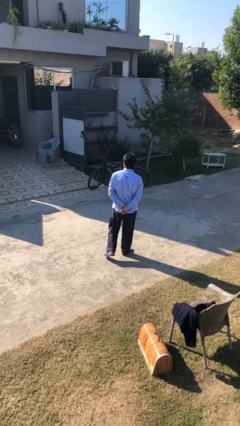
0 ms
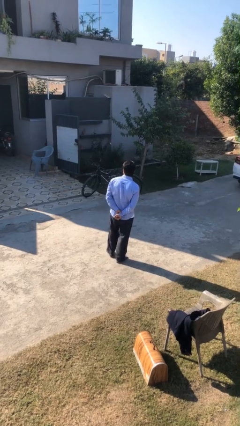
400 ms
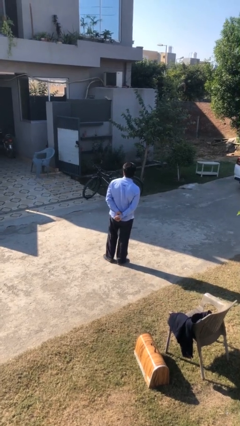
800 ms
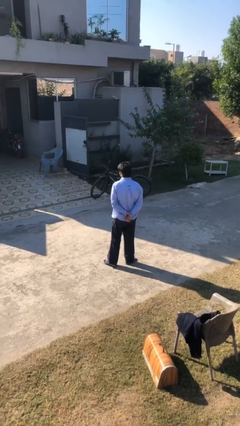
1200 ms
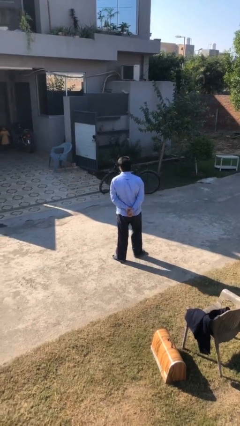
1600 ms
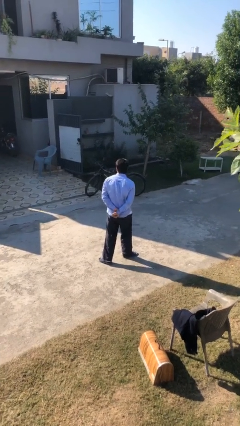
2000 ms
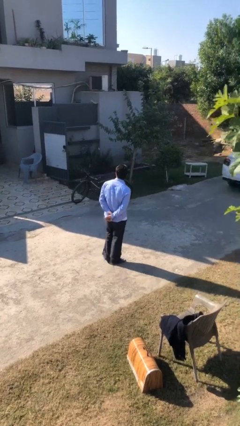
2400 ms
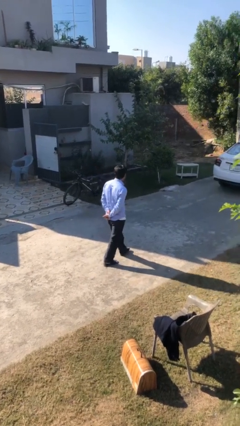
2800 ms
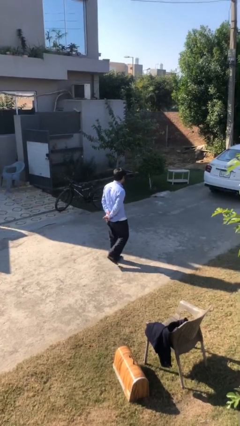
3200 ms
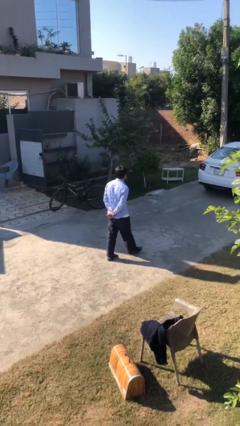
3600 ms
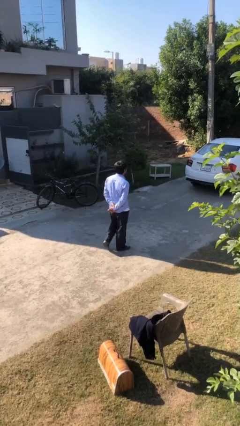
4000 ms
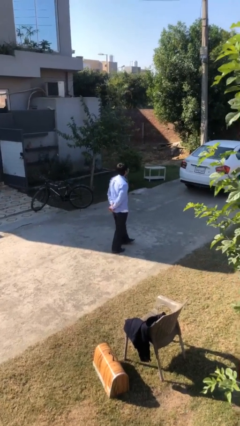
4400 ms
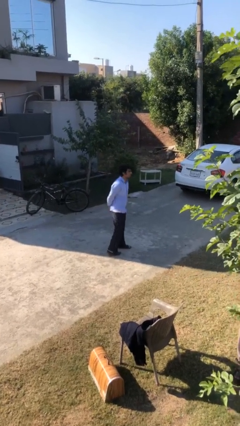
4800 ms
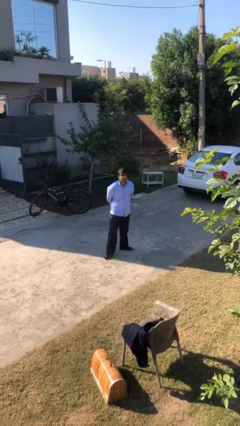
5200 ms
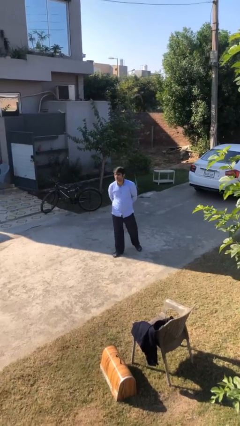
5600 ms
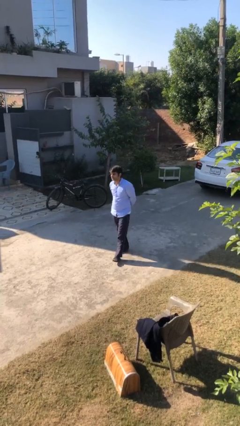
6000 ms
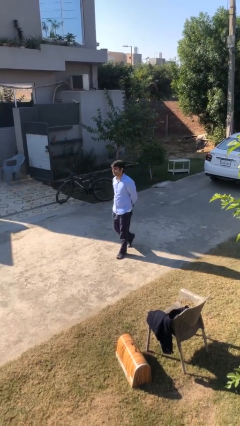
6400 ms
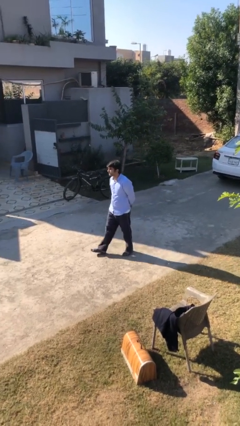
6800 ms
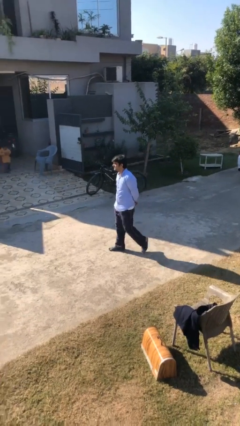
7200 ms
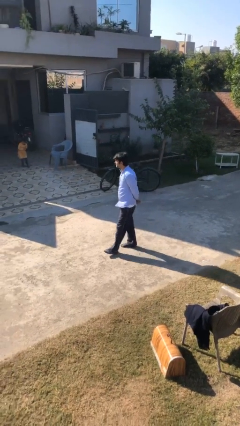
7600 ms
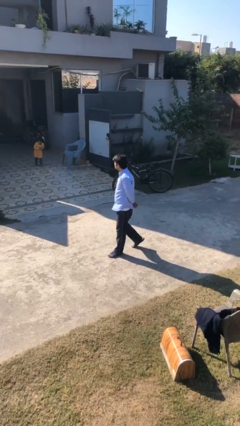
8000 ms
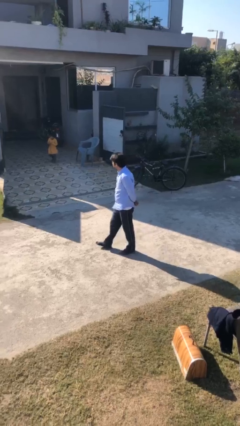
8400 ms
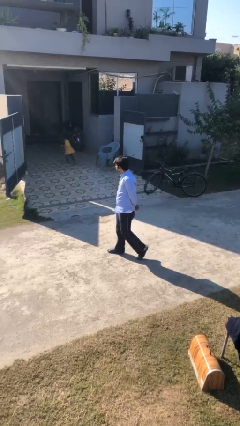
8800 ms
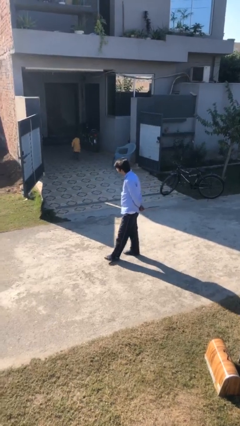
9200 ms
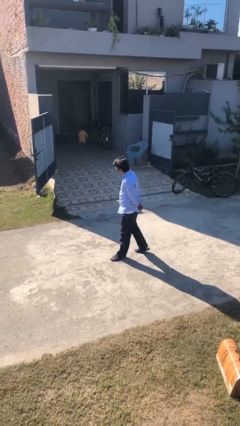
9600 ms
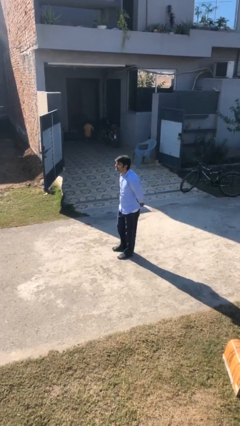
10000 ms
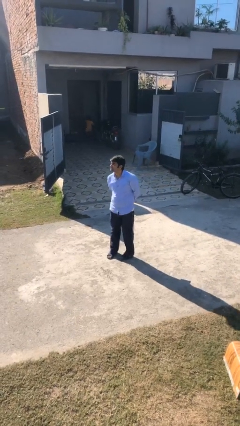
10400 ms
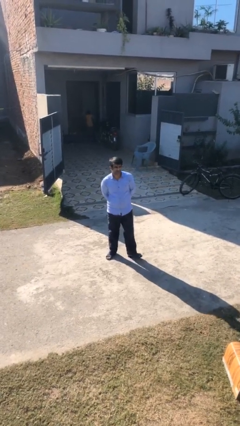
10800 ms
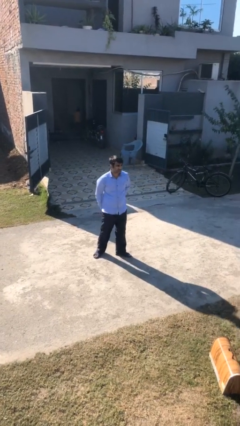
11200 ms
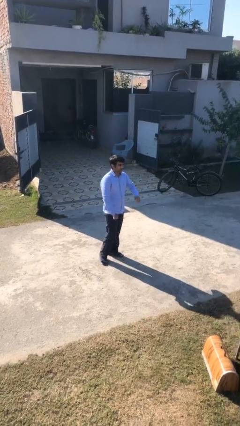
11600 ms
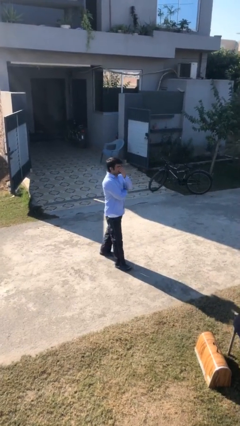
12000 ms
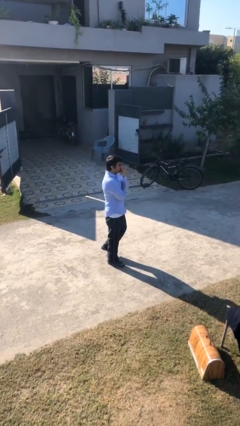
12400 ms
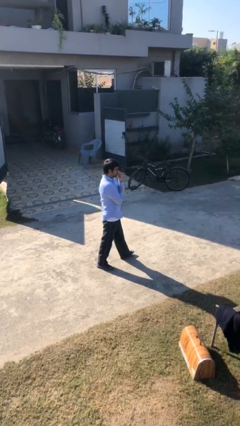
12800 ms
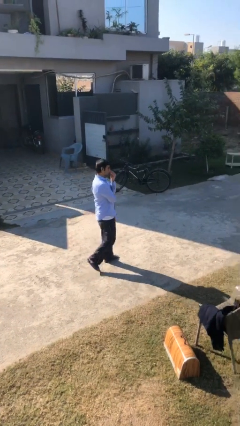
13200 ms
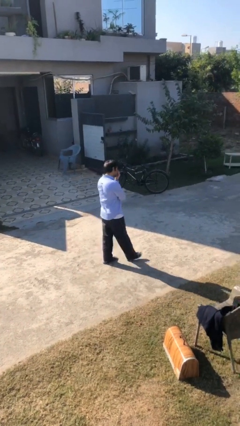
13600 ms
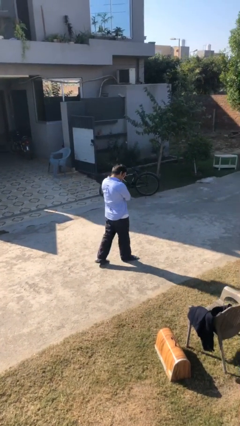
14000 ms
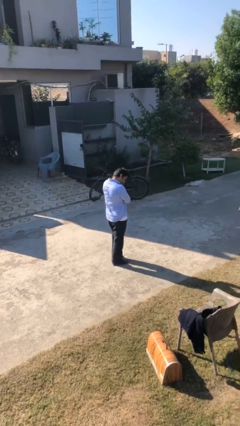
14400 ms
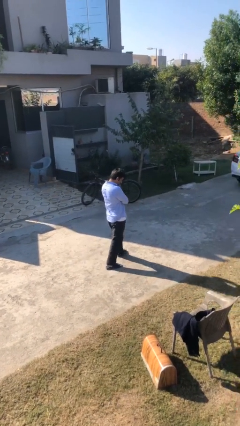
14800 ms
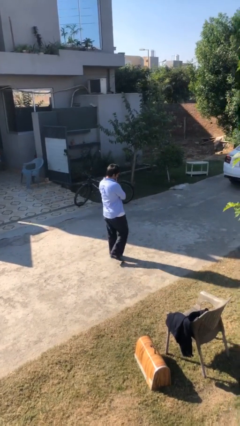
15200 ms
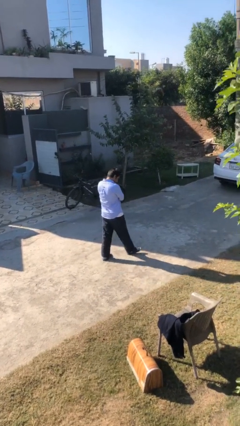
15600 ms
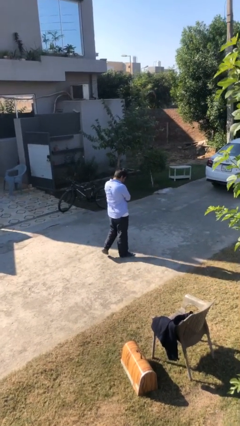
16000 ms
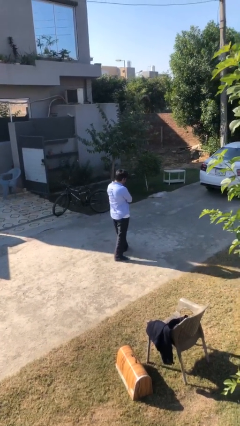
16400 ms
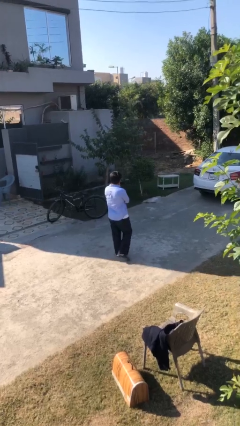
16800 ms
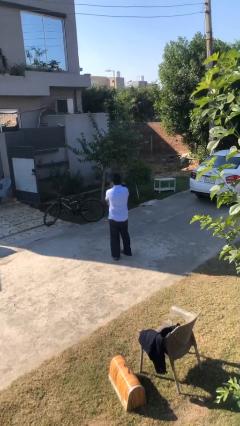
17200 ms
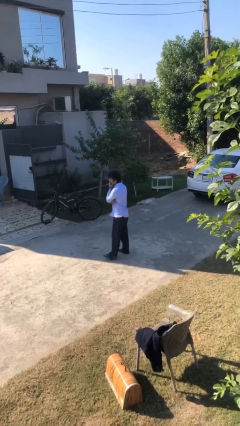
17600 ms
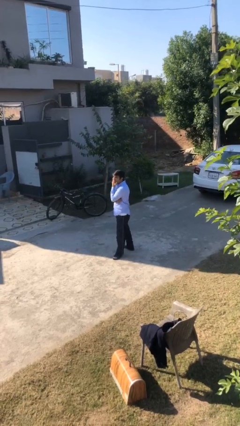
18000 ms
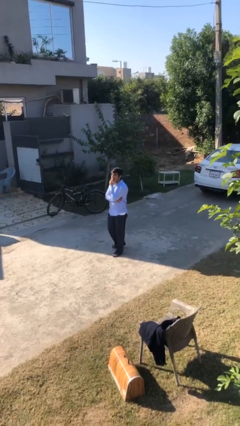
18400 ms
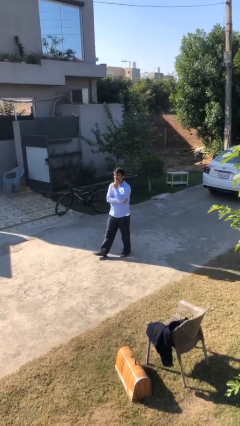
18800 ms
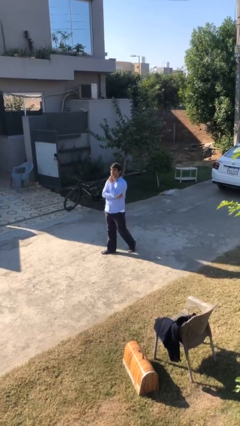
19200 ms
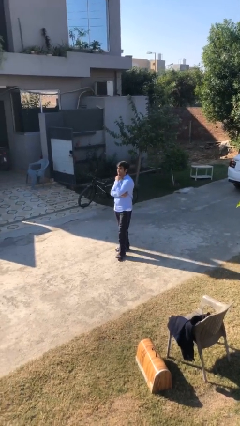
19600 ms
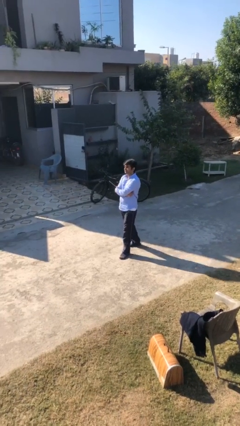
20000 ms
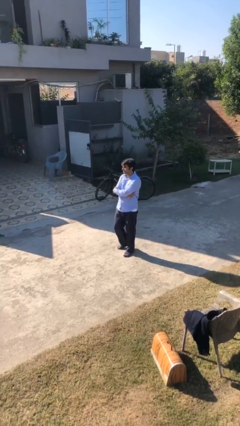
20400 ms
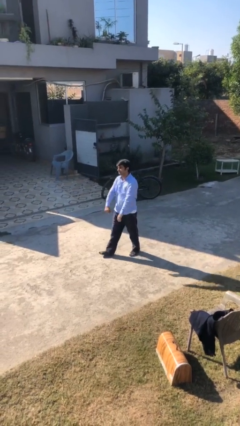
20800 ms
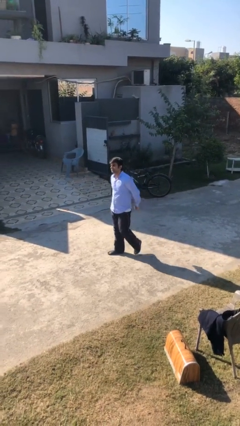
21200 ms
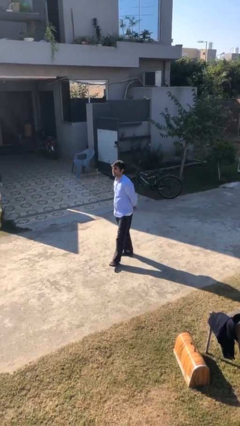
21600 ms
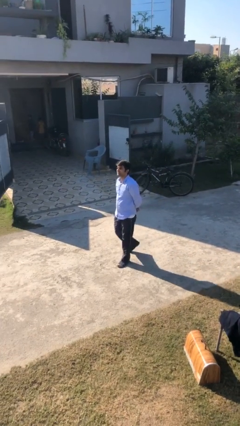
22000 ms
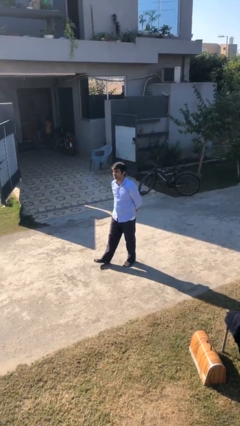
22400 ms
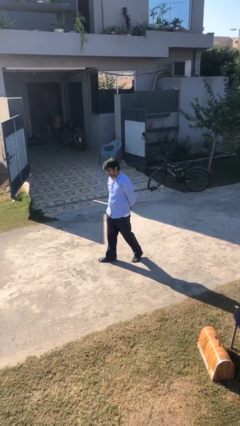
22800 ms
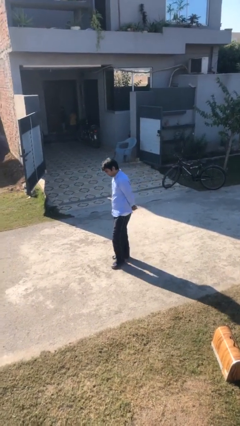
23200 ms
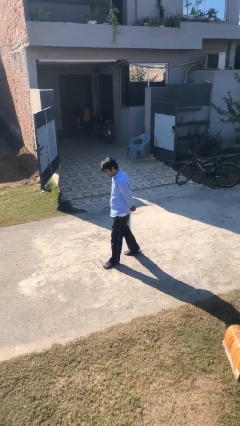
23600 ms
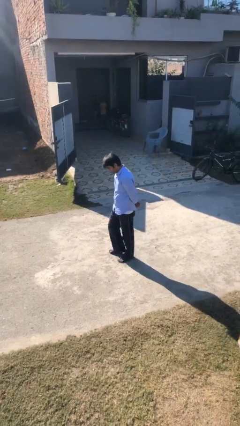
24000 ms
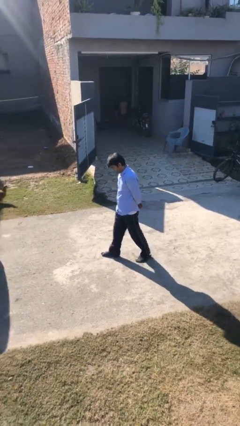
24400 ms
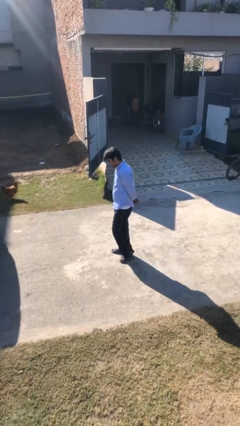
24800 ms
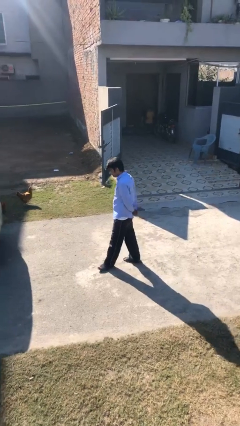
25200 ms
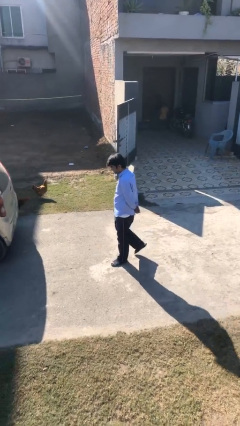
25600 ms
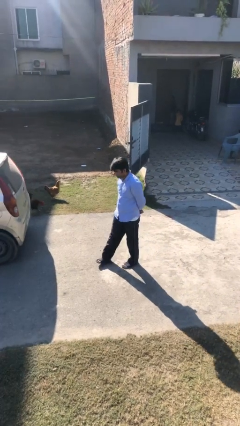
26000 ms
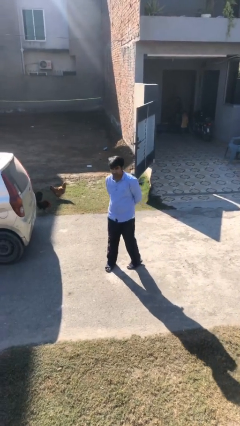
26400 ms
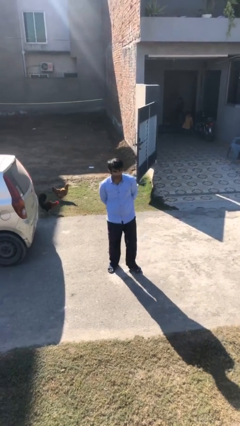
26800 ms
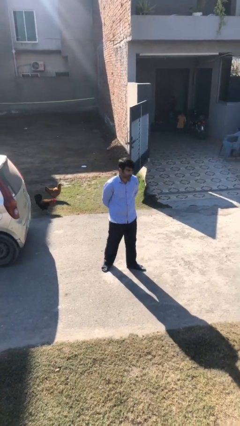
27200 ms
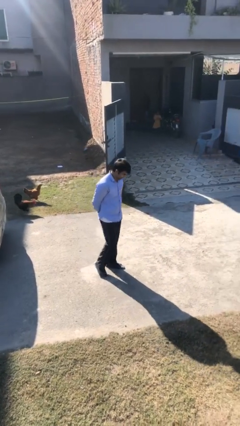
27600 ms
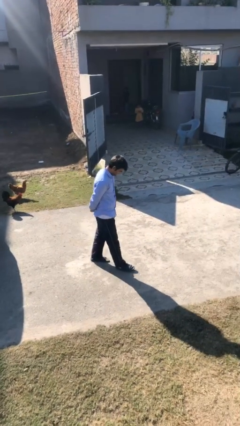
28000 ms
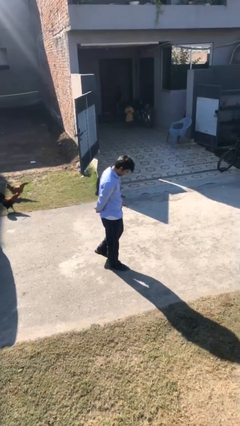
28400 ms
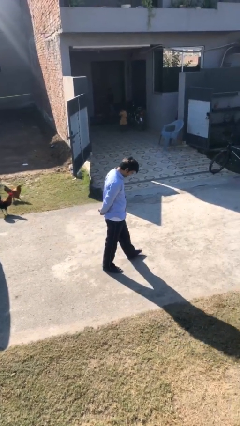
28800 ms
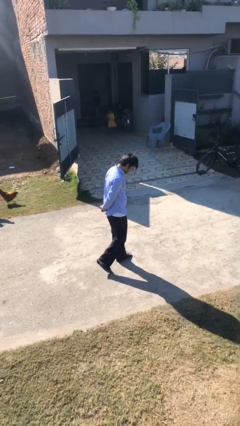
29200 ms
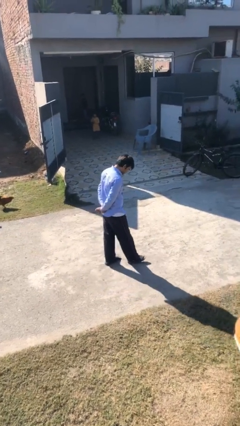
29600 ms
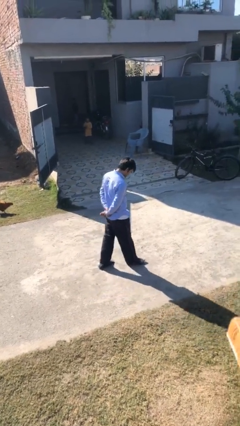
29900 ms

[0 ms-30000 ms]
person walks

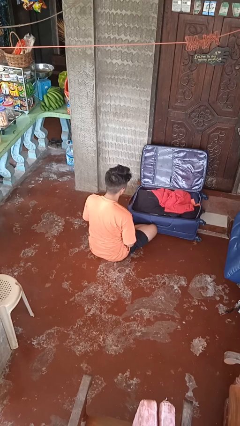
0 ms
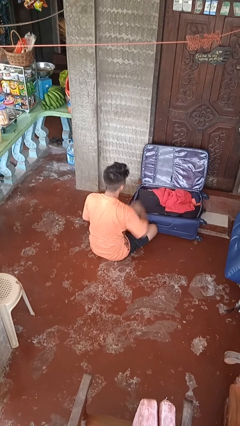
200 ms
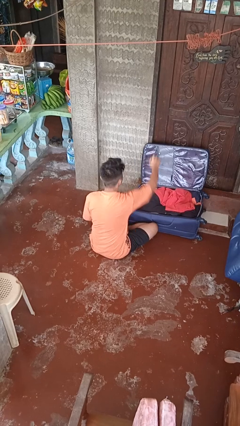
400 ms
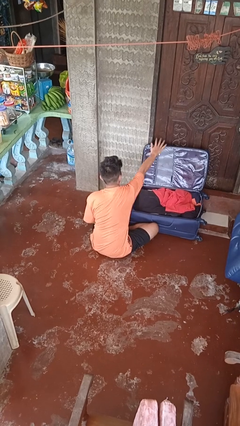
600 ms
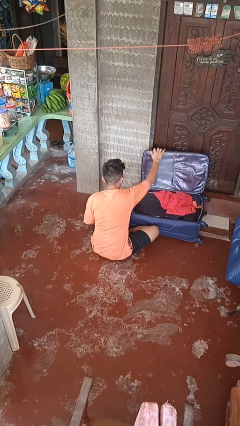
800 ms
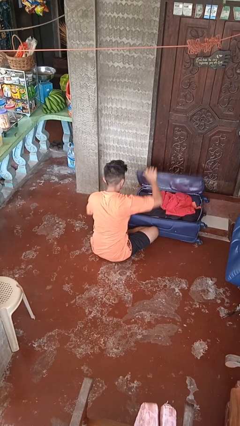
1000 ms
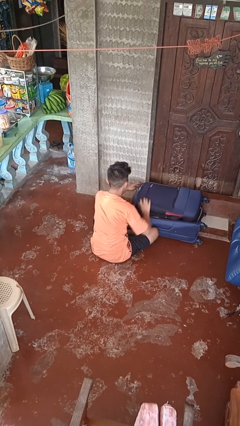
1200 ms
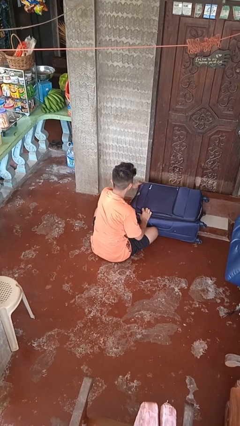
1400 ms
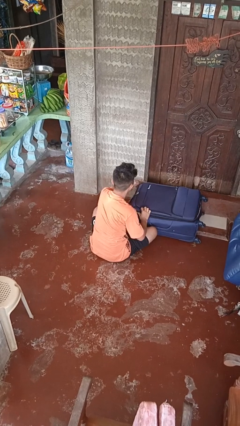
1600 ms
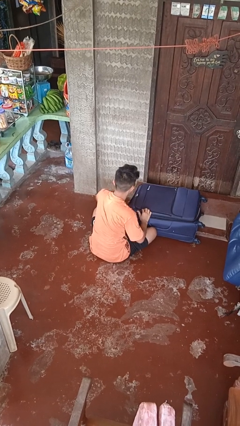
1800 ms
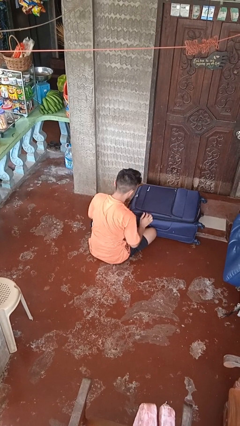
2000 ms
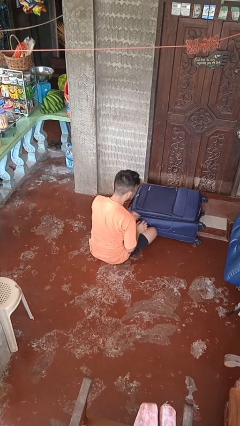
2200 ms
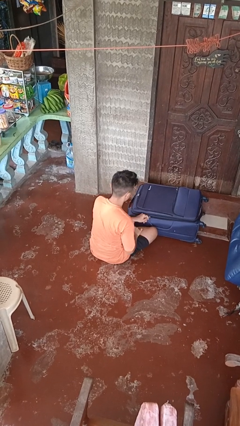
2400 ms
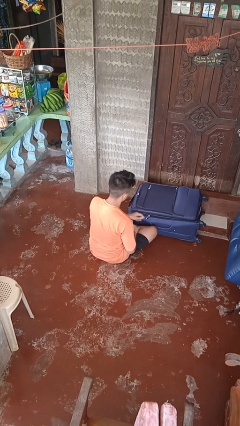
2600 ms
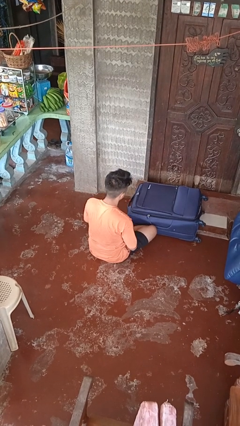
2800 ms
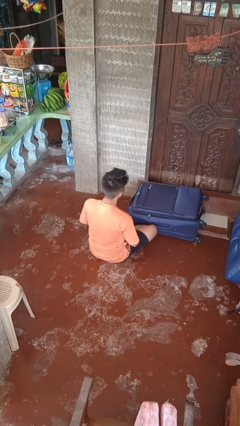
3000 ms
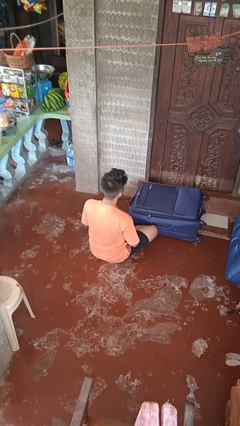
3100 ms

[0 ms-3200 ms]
person closes suitcase

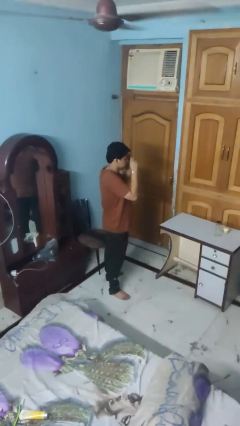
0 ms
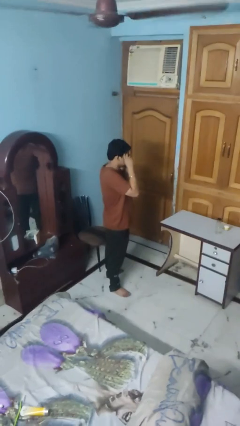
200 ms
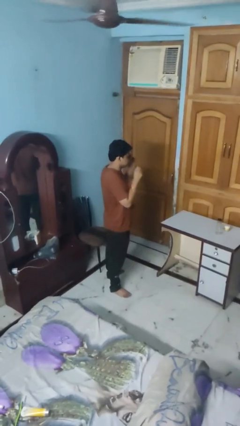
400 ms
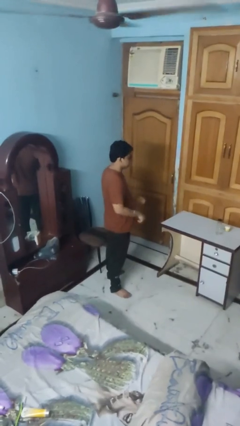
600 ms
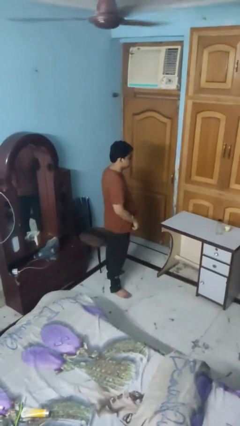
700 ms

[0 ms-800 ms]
person puts on sunglasses
